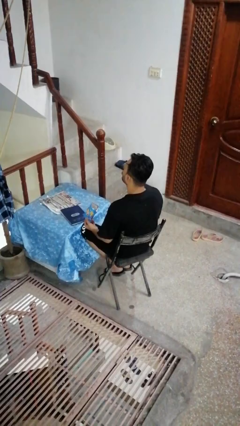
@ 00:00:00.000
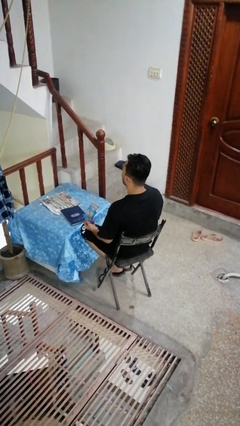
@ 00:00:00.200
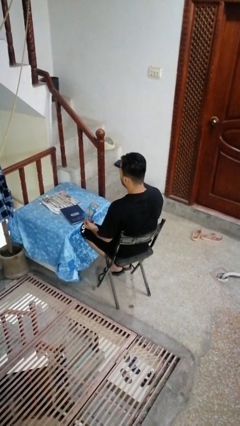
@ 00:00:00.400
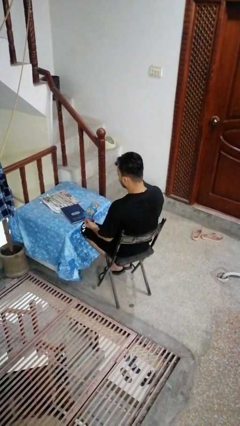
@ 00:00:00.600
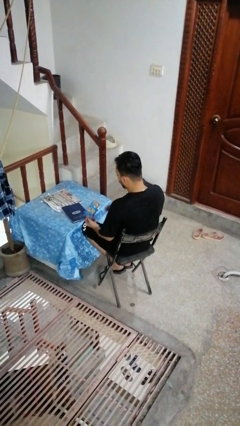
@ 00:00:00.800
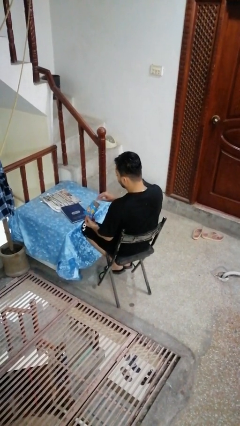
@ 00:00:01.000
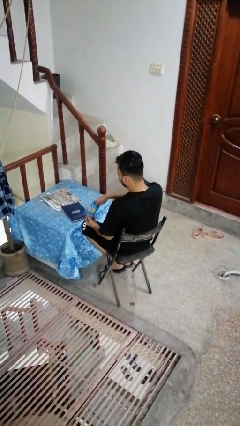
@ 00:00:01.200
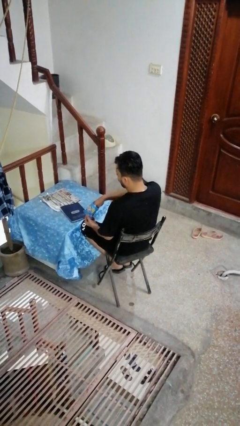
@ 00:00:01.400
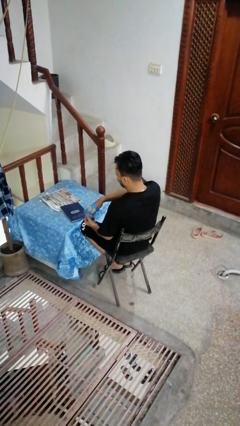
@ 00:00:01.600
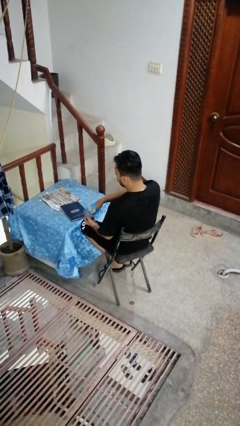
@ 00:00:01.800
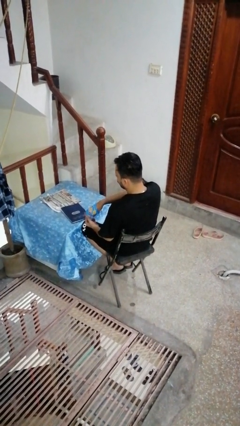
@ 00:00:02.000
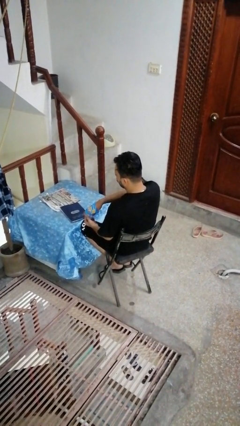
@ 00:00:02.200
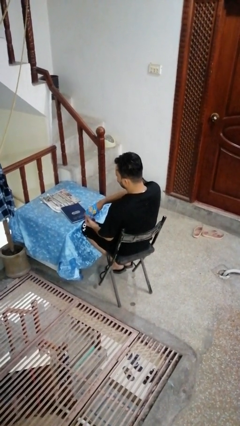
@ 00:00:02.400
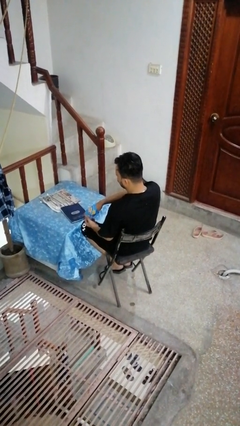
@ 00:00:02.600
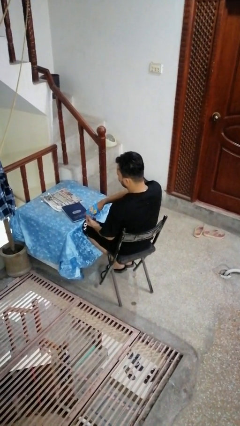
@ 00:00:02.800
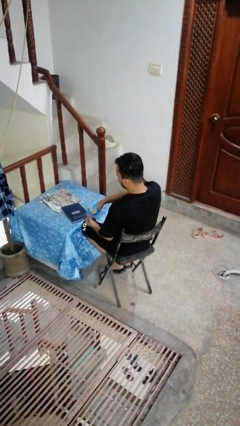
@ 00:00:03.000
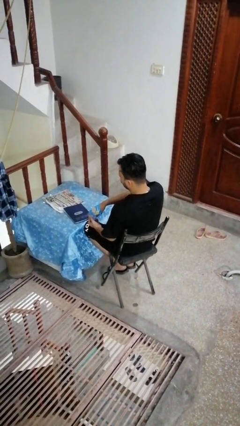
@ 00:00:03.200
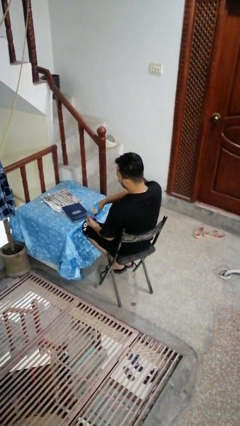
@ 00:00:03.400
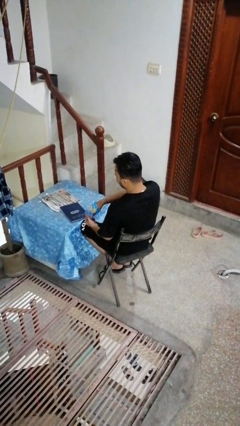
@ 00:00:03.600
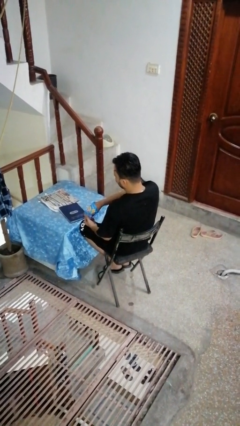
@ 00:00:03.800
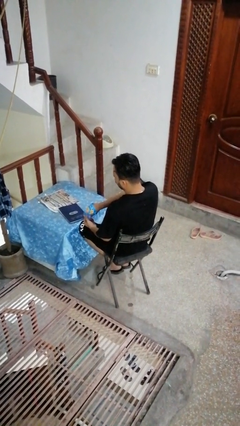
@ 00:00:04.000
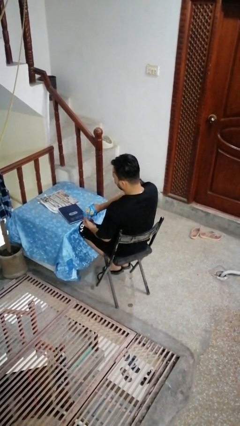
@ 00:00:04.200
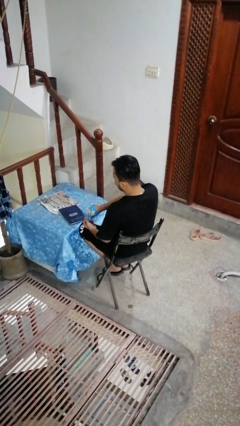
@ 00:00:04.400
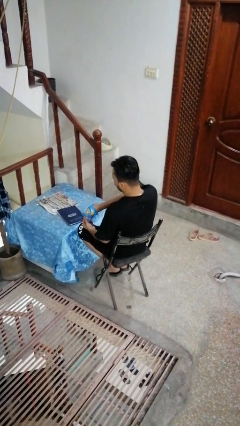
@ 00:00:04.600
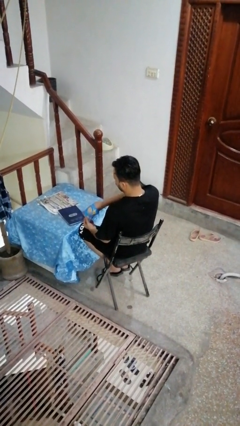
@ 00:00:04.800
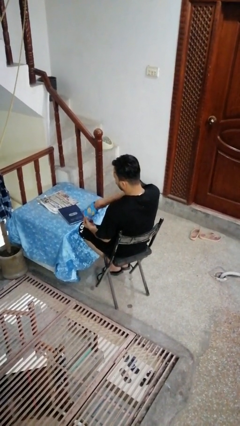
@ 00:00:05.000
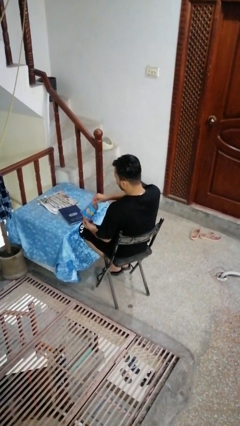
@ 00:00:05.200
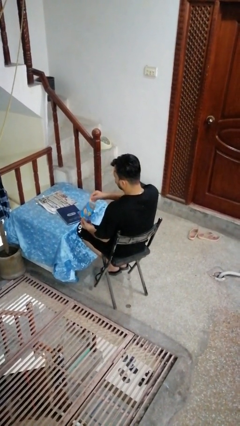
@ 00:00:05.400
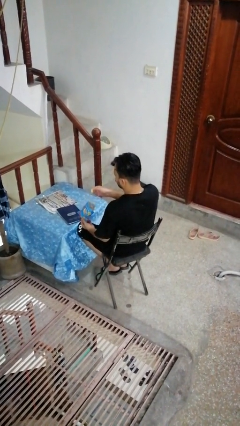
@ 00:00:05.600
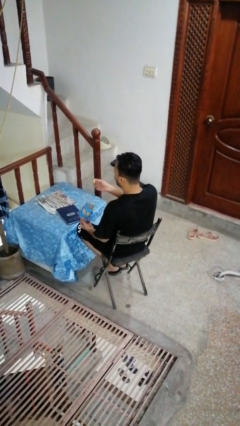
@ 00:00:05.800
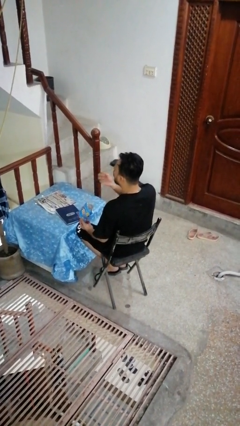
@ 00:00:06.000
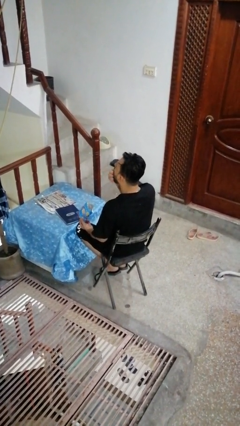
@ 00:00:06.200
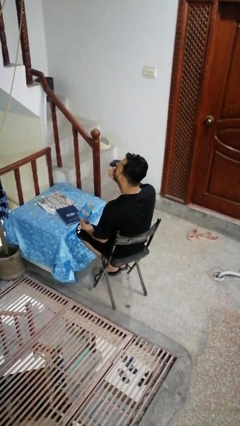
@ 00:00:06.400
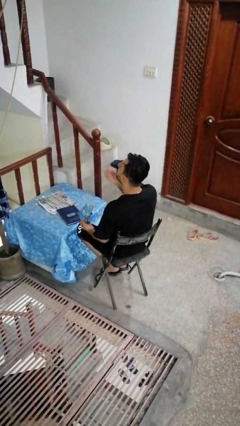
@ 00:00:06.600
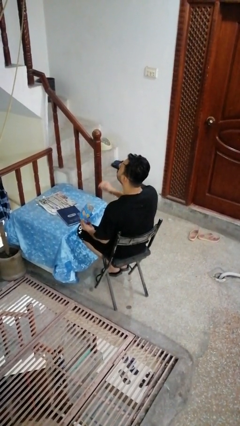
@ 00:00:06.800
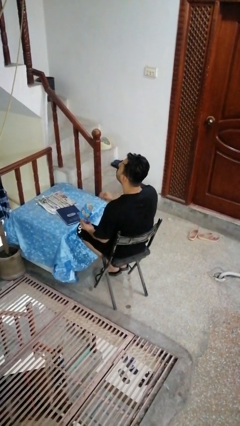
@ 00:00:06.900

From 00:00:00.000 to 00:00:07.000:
person eats snack from bag

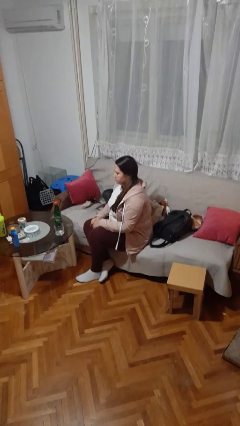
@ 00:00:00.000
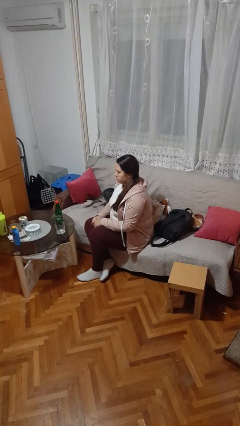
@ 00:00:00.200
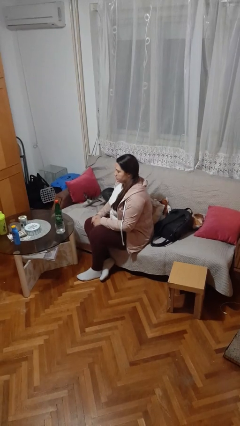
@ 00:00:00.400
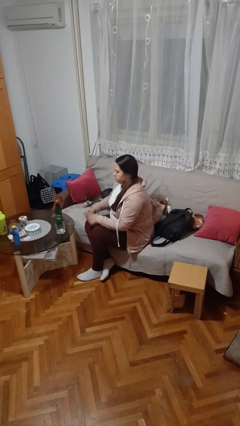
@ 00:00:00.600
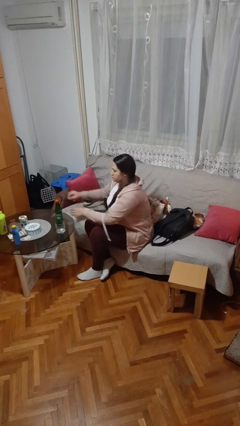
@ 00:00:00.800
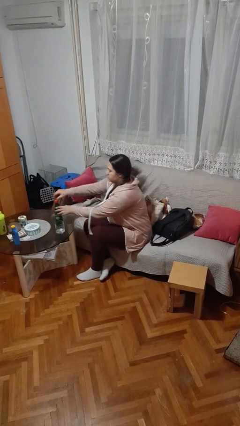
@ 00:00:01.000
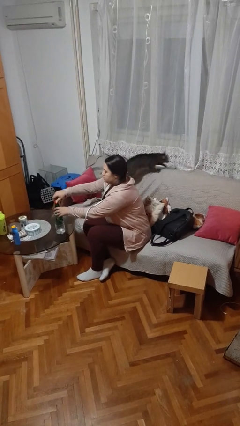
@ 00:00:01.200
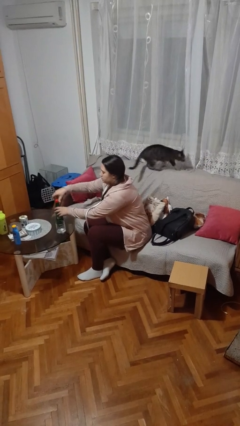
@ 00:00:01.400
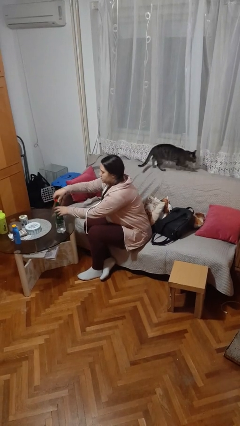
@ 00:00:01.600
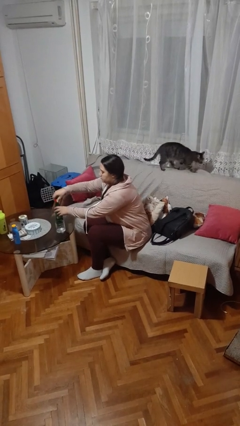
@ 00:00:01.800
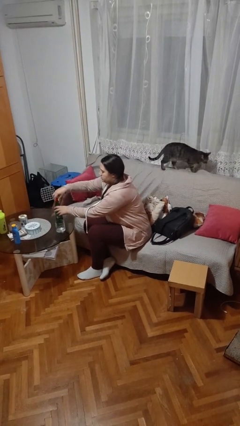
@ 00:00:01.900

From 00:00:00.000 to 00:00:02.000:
person unscrews lid from bottle

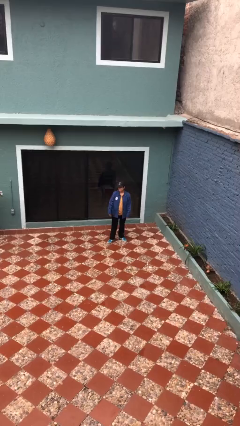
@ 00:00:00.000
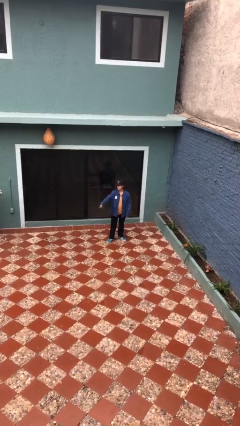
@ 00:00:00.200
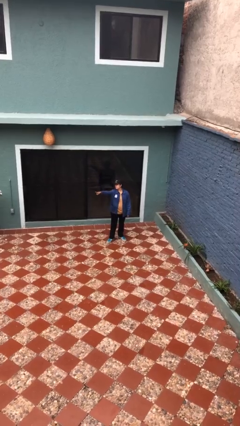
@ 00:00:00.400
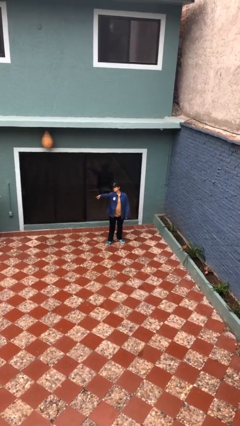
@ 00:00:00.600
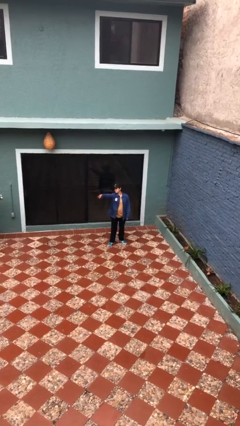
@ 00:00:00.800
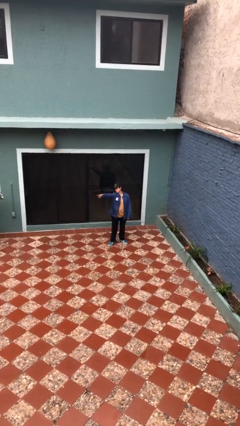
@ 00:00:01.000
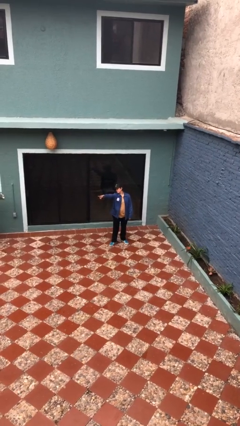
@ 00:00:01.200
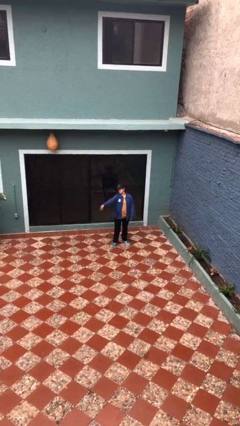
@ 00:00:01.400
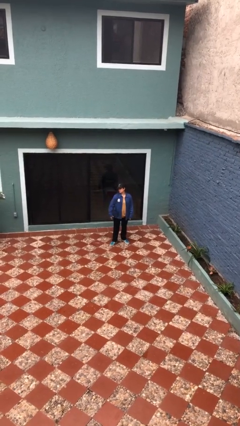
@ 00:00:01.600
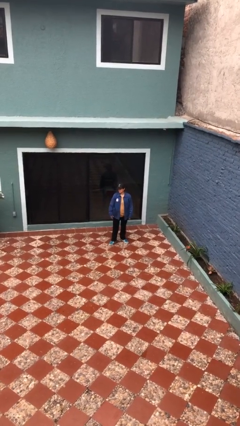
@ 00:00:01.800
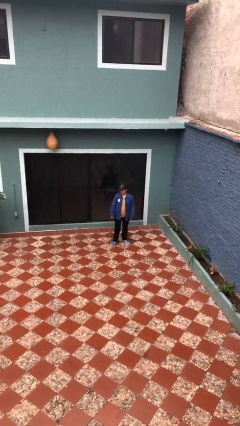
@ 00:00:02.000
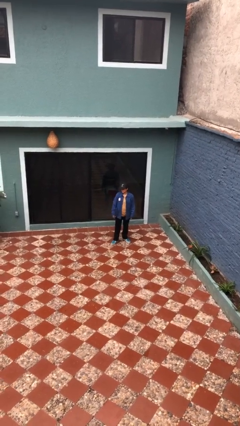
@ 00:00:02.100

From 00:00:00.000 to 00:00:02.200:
person points at person

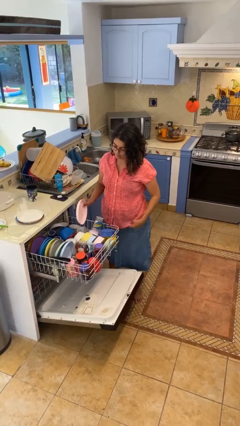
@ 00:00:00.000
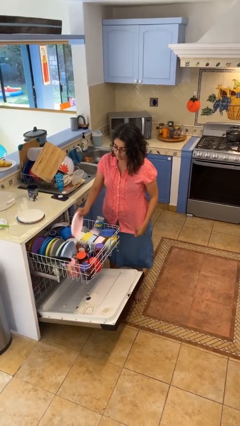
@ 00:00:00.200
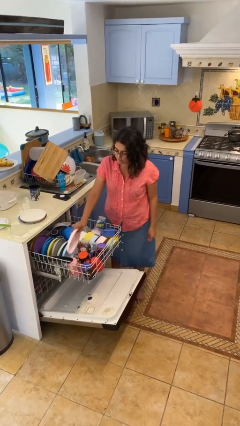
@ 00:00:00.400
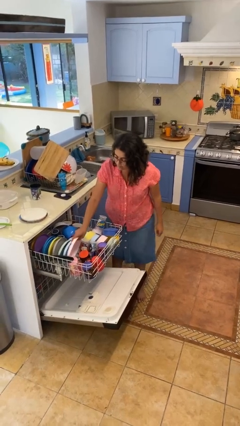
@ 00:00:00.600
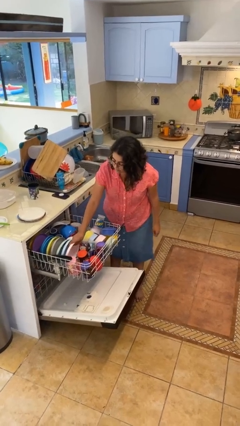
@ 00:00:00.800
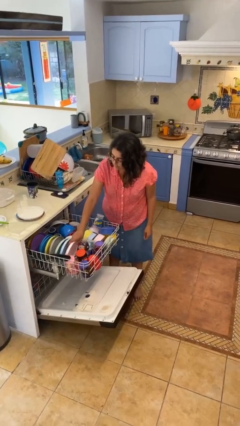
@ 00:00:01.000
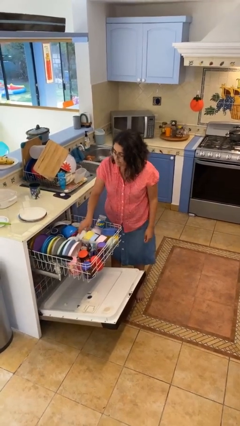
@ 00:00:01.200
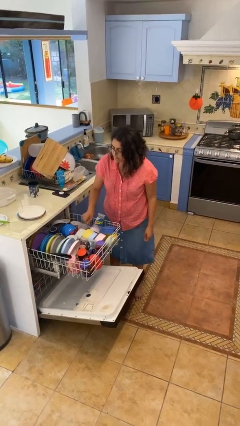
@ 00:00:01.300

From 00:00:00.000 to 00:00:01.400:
person loads dishwasher

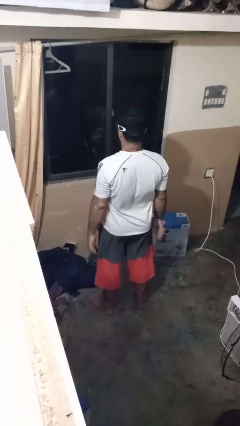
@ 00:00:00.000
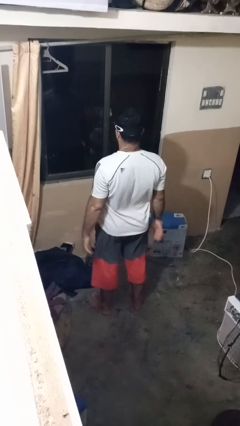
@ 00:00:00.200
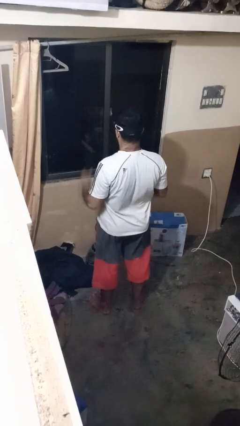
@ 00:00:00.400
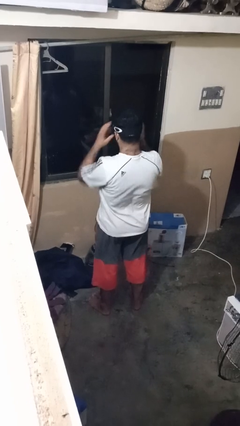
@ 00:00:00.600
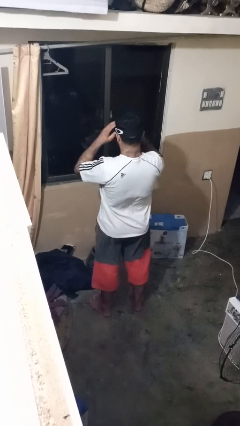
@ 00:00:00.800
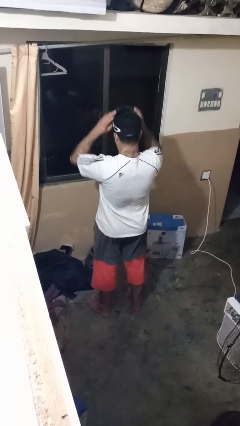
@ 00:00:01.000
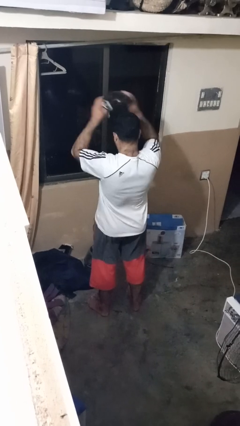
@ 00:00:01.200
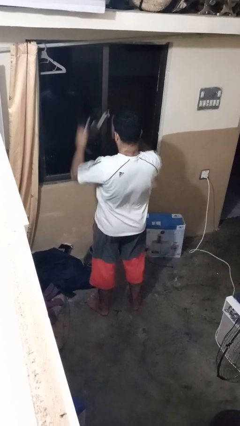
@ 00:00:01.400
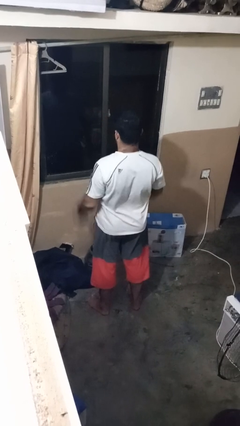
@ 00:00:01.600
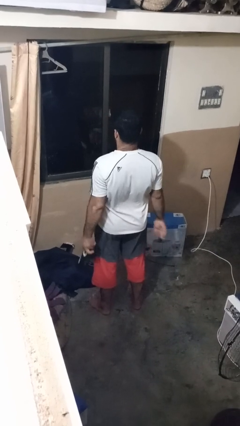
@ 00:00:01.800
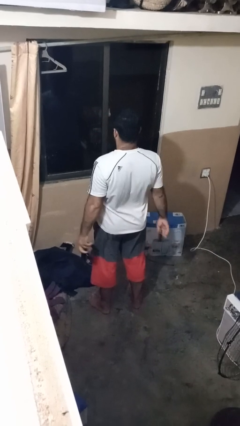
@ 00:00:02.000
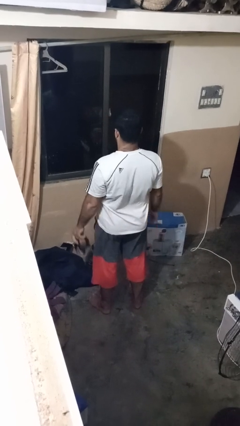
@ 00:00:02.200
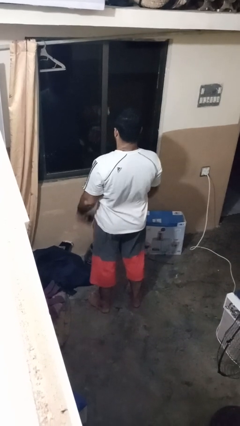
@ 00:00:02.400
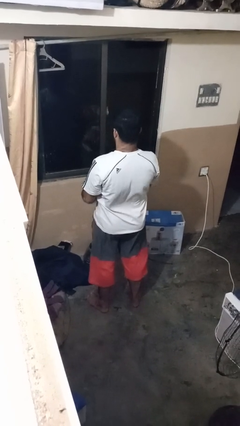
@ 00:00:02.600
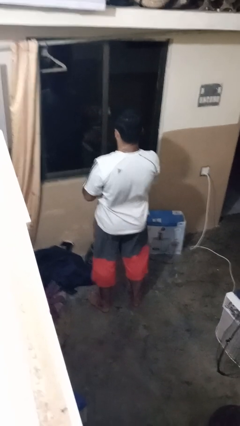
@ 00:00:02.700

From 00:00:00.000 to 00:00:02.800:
person takes off sunglasses

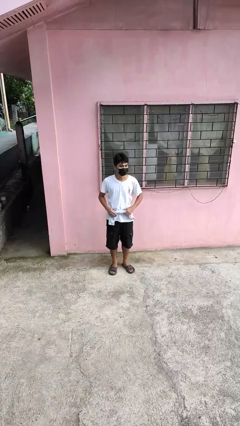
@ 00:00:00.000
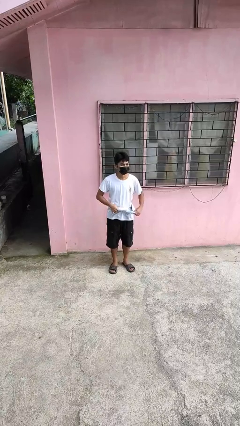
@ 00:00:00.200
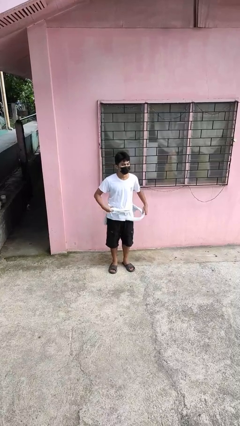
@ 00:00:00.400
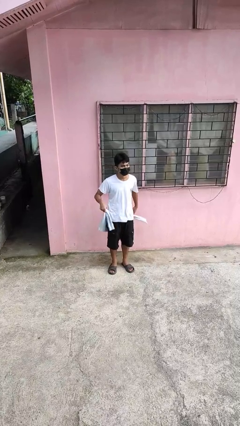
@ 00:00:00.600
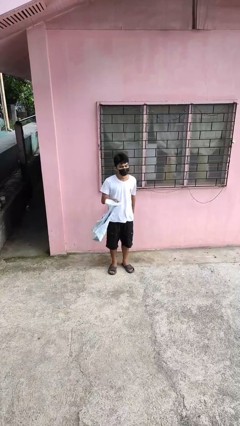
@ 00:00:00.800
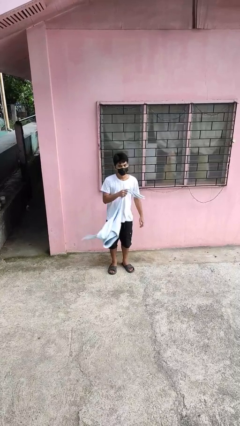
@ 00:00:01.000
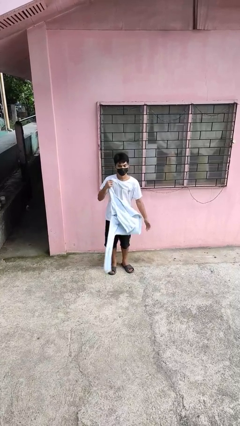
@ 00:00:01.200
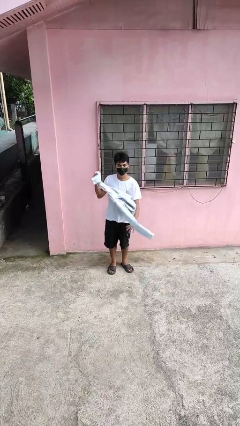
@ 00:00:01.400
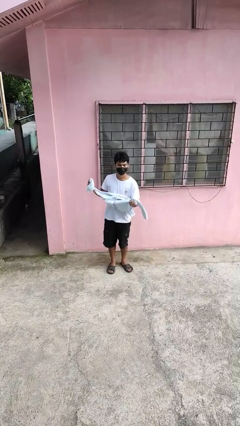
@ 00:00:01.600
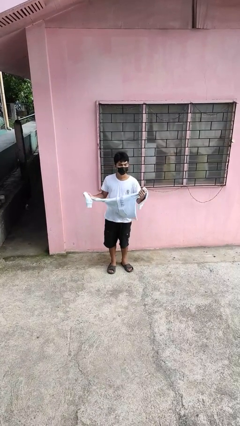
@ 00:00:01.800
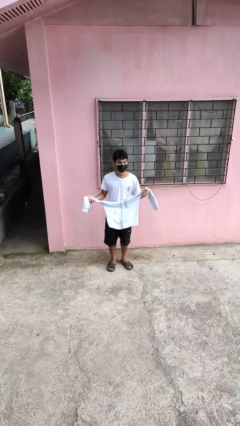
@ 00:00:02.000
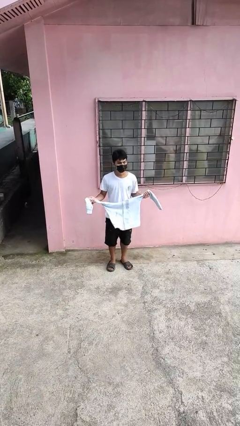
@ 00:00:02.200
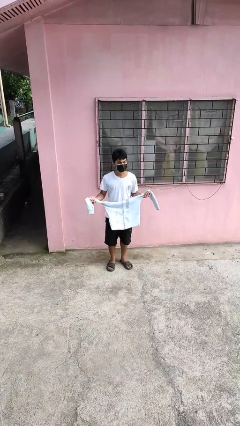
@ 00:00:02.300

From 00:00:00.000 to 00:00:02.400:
person unties jacket around waist
